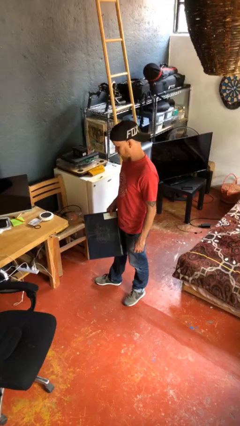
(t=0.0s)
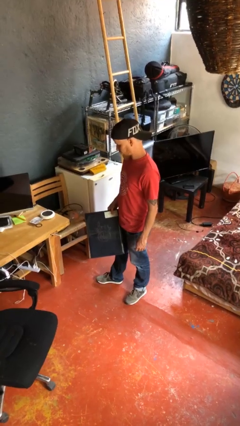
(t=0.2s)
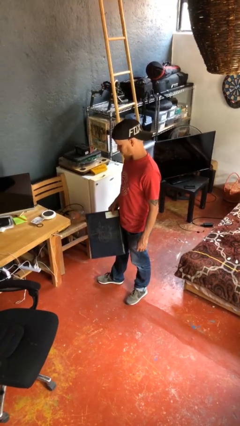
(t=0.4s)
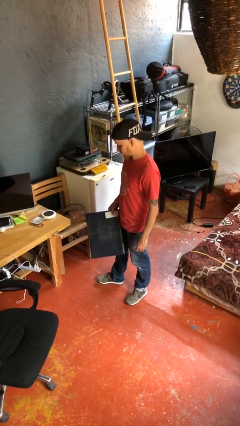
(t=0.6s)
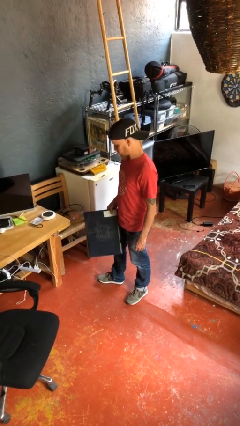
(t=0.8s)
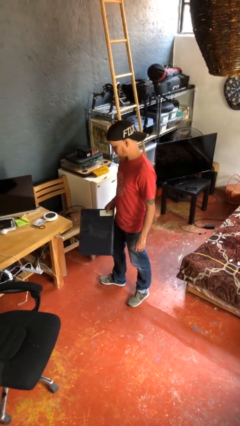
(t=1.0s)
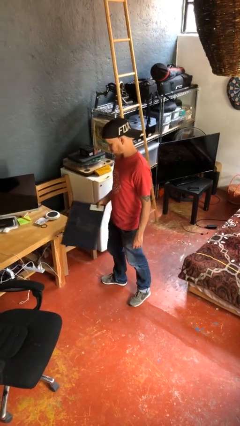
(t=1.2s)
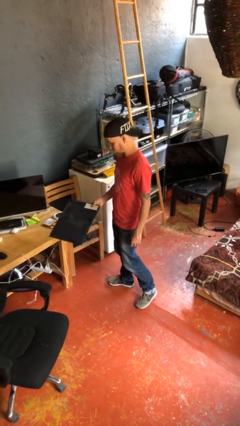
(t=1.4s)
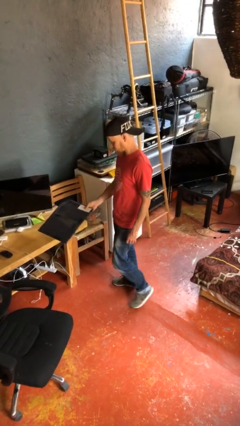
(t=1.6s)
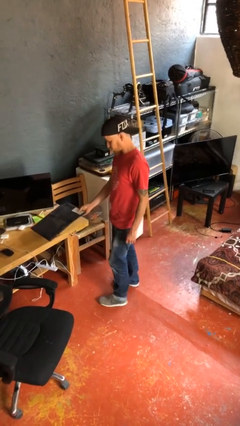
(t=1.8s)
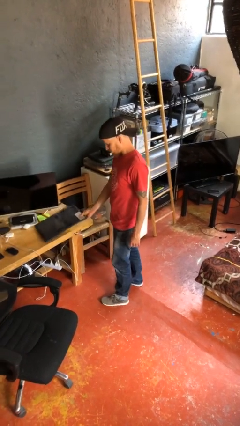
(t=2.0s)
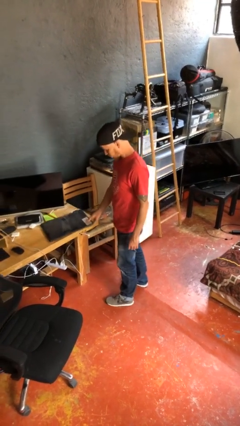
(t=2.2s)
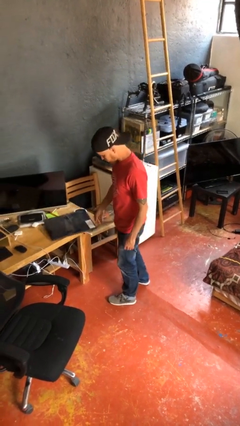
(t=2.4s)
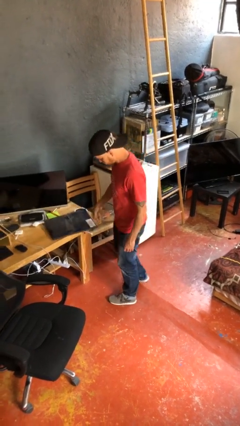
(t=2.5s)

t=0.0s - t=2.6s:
person puts down object on table

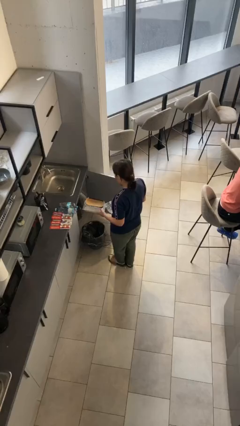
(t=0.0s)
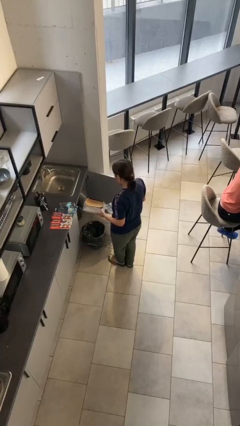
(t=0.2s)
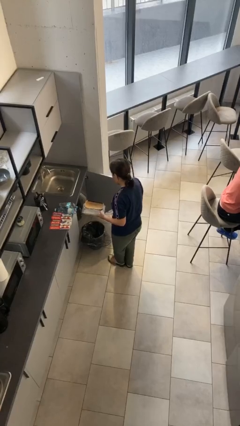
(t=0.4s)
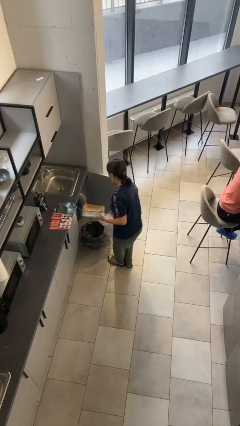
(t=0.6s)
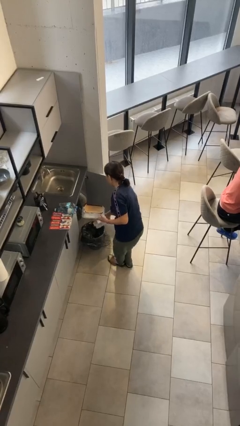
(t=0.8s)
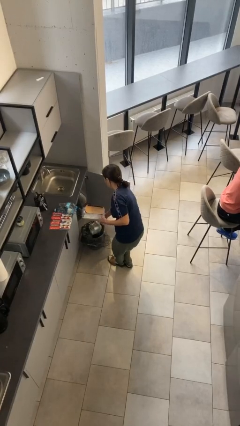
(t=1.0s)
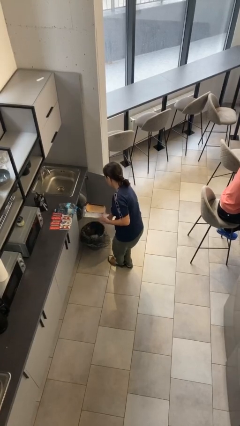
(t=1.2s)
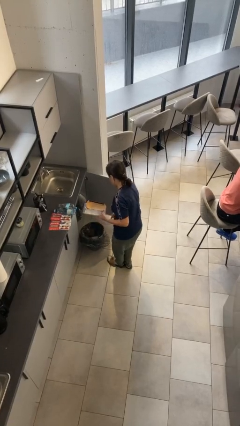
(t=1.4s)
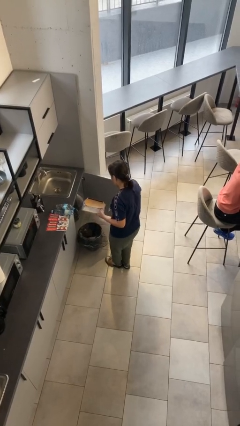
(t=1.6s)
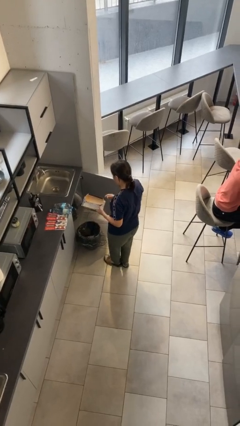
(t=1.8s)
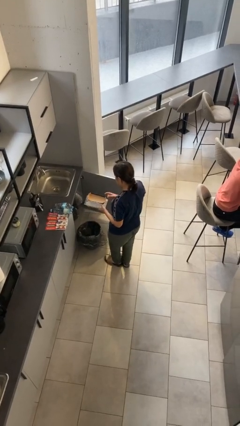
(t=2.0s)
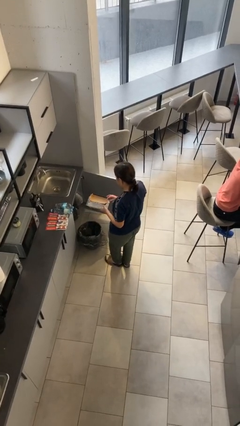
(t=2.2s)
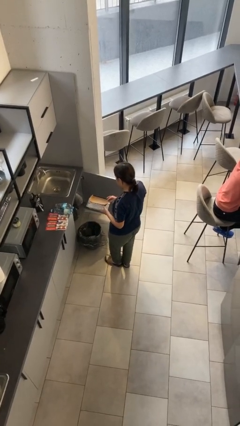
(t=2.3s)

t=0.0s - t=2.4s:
person discards trash

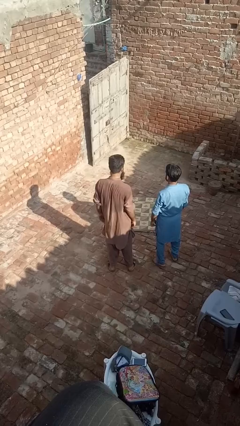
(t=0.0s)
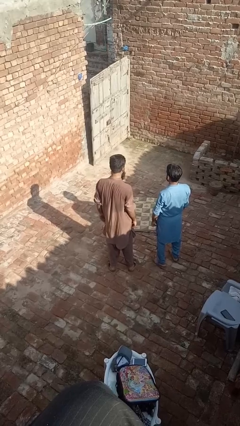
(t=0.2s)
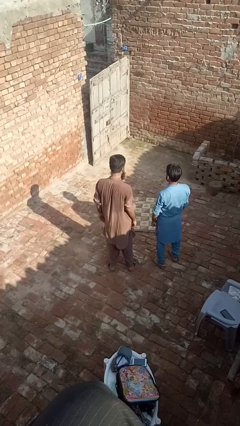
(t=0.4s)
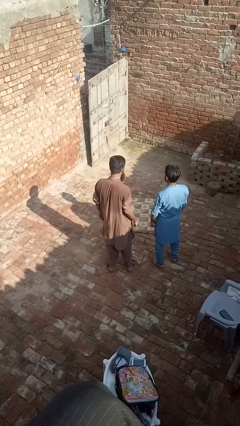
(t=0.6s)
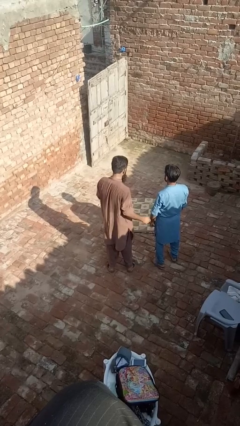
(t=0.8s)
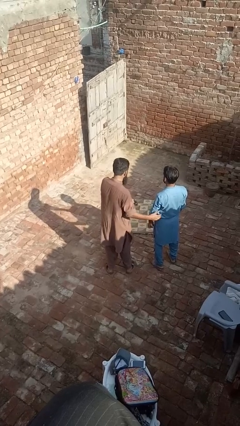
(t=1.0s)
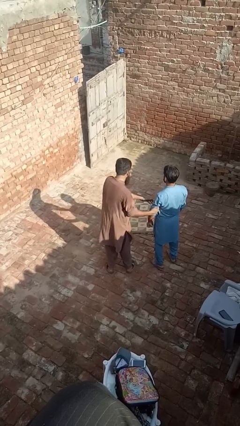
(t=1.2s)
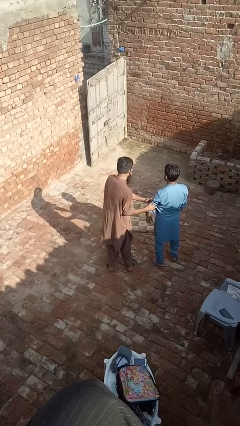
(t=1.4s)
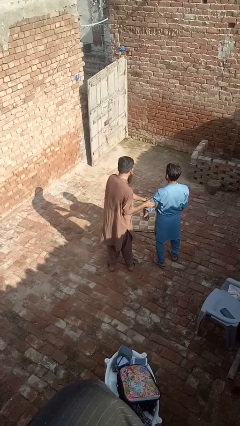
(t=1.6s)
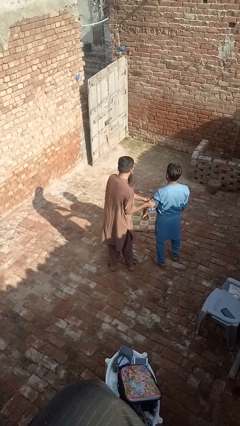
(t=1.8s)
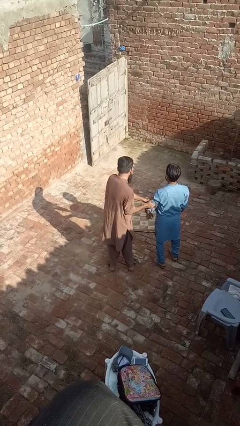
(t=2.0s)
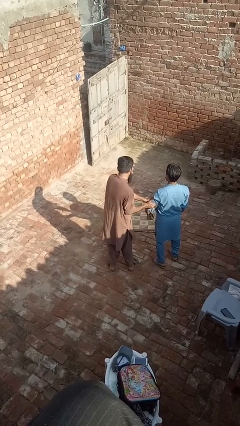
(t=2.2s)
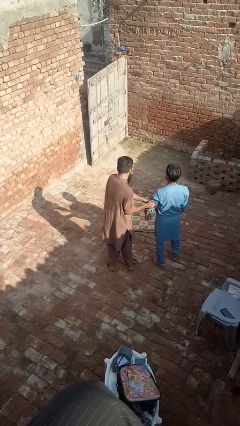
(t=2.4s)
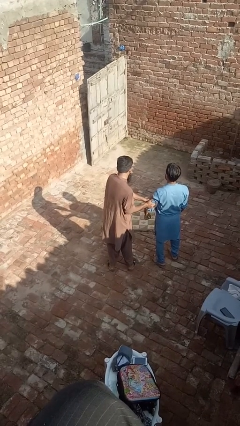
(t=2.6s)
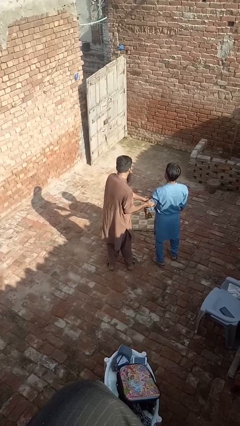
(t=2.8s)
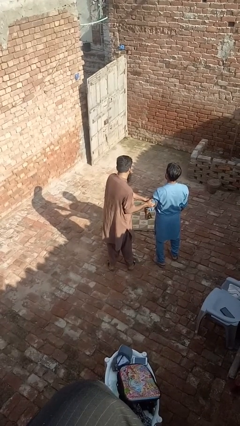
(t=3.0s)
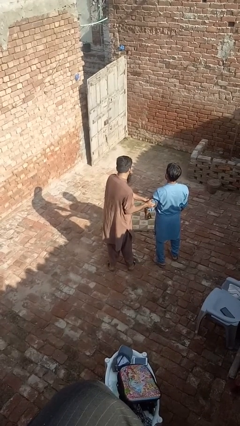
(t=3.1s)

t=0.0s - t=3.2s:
person grabs person by bicep

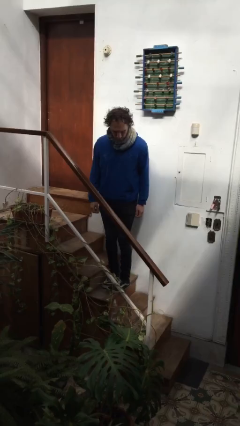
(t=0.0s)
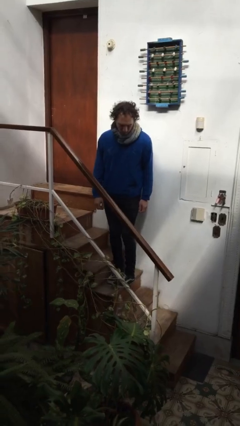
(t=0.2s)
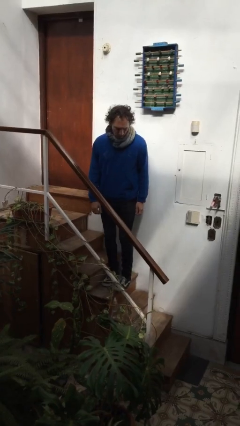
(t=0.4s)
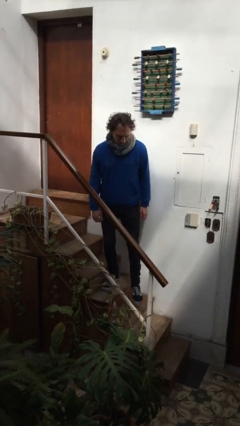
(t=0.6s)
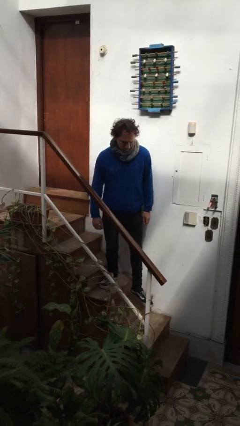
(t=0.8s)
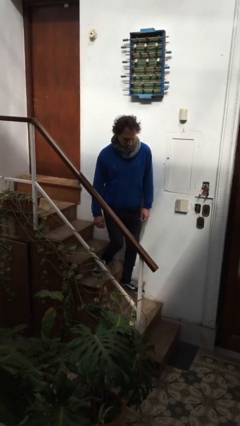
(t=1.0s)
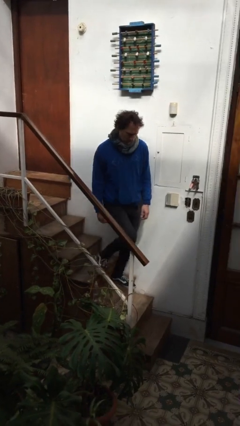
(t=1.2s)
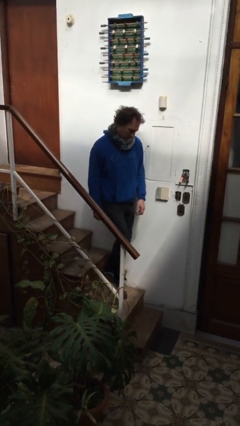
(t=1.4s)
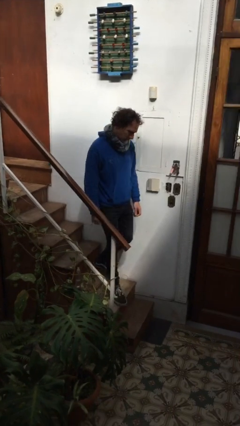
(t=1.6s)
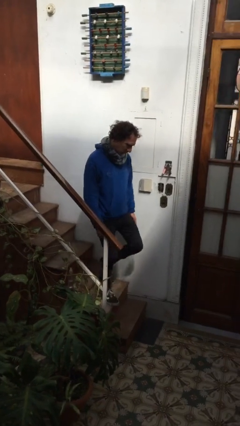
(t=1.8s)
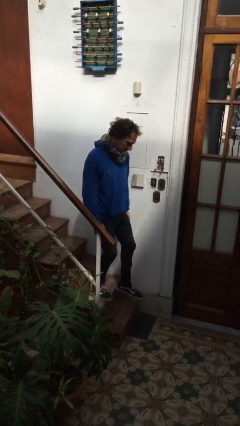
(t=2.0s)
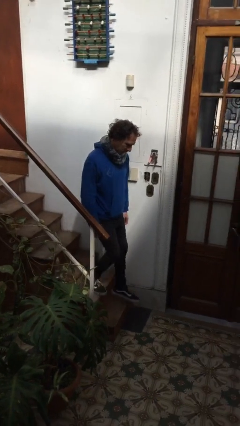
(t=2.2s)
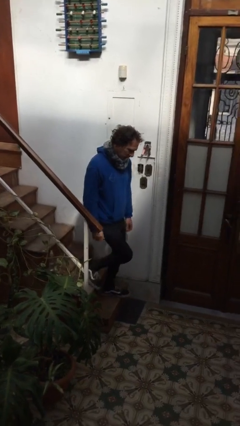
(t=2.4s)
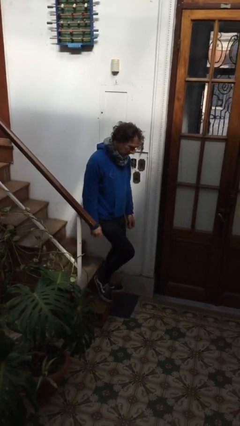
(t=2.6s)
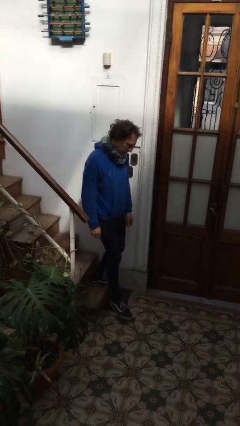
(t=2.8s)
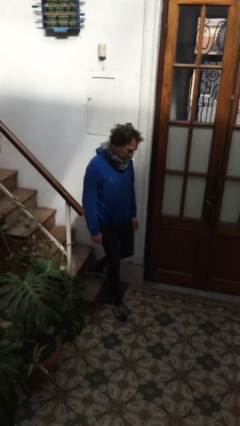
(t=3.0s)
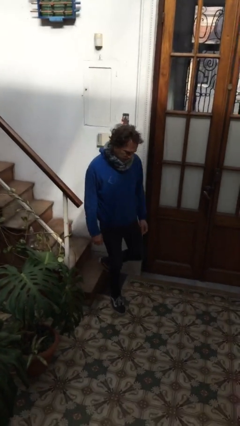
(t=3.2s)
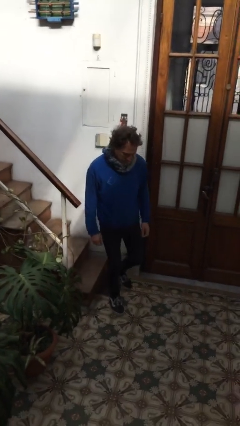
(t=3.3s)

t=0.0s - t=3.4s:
person climbs down stairs

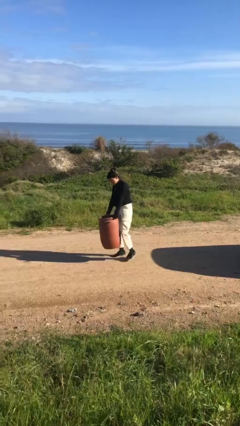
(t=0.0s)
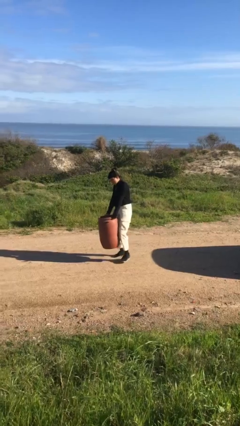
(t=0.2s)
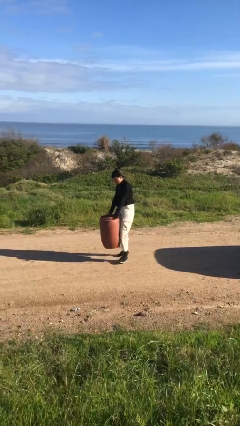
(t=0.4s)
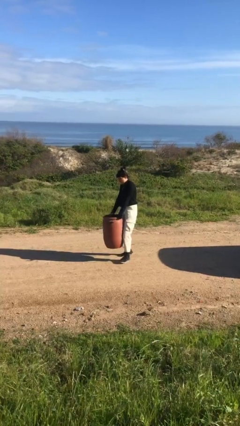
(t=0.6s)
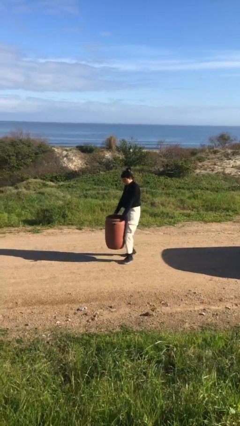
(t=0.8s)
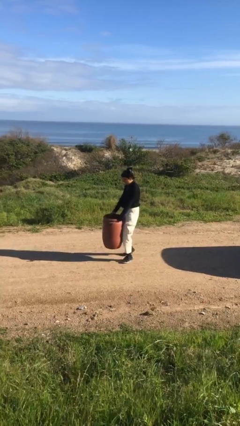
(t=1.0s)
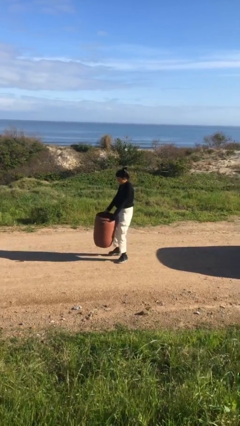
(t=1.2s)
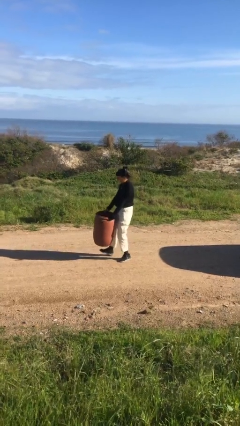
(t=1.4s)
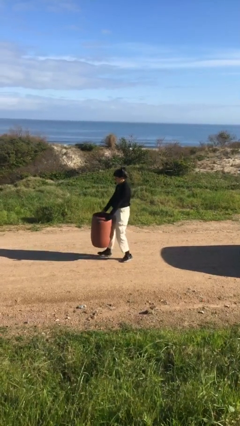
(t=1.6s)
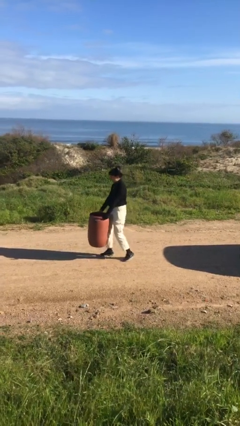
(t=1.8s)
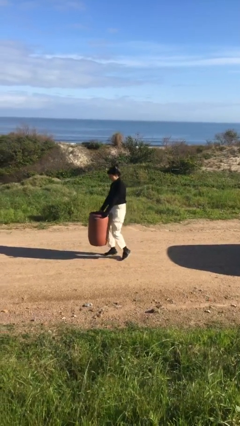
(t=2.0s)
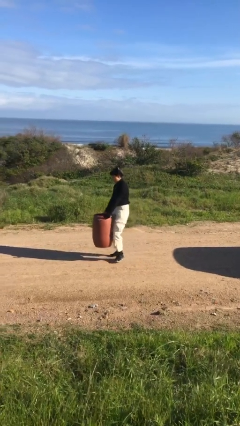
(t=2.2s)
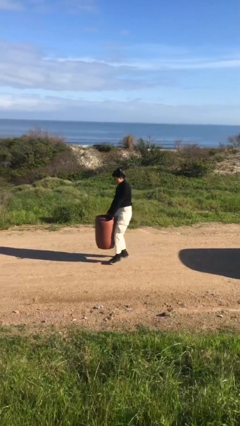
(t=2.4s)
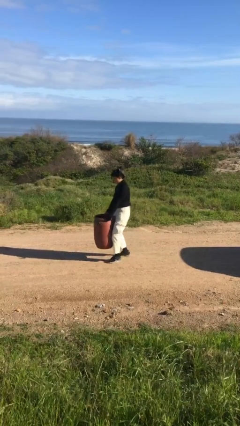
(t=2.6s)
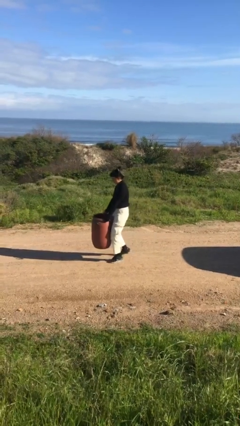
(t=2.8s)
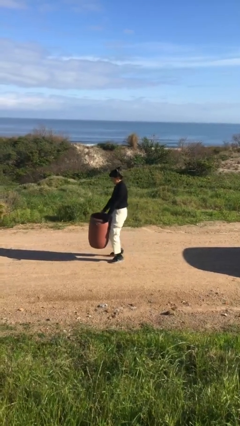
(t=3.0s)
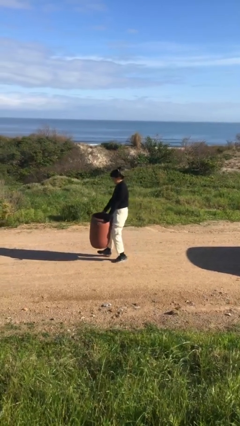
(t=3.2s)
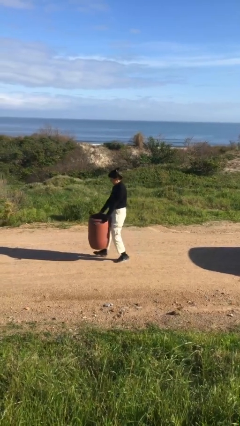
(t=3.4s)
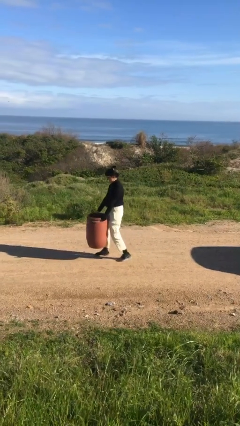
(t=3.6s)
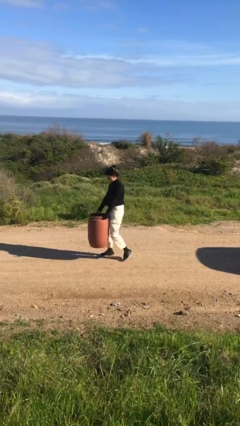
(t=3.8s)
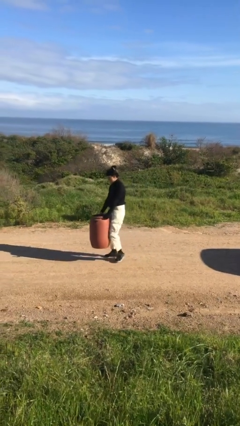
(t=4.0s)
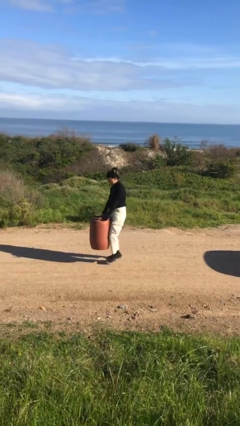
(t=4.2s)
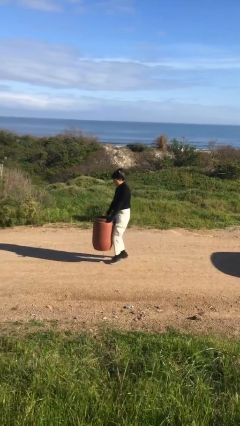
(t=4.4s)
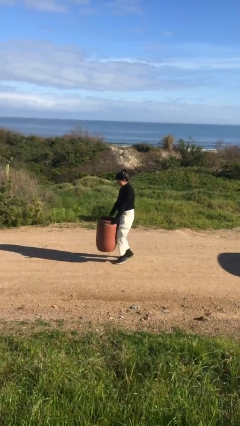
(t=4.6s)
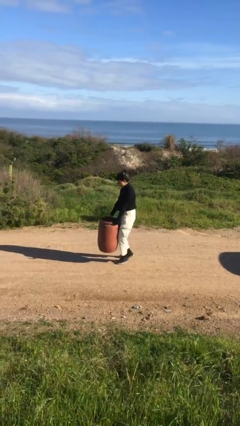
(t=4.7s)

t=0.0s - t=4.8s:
person carries heavy object

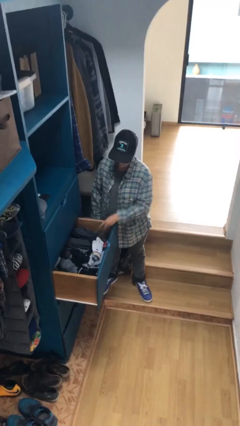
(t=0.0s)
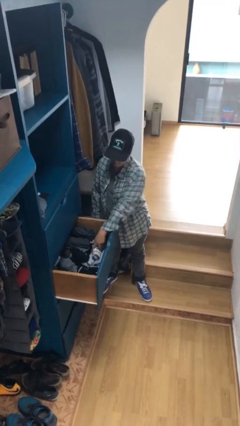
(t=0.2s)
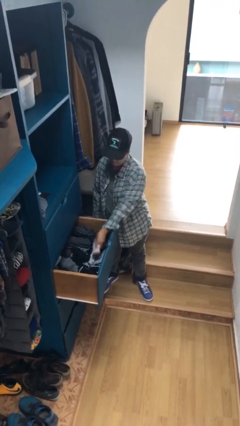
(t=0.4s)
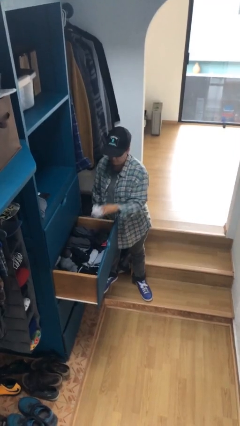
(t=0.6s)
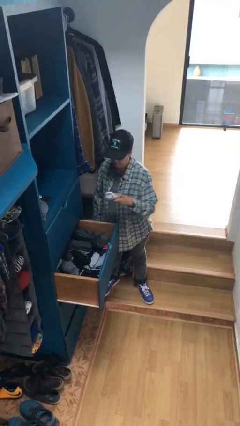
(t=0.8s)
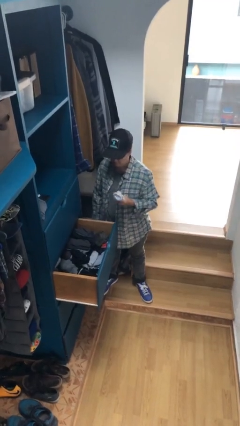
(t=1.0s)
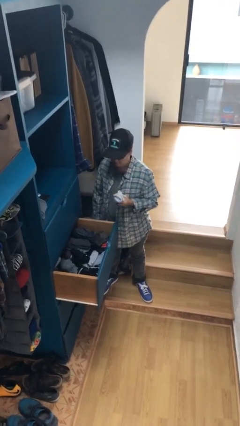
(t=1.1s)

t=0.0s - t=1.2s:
person takes clothes from dresser
